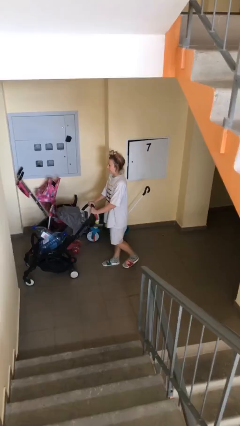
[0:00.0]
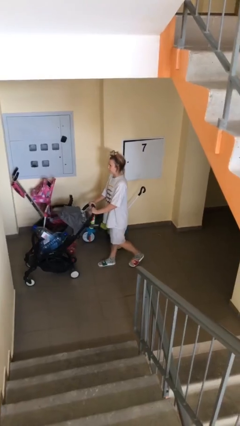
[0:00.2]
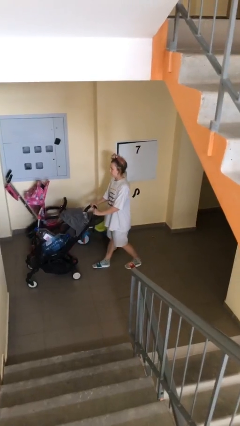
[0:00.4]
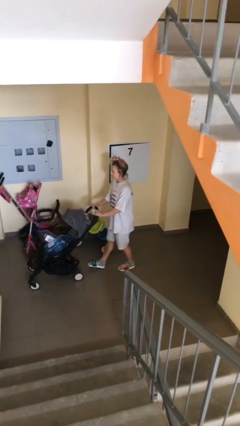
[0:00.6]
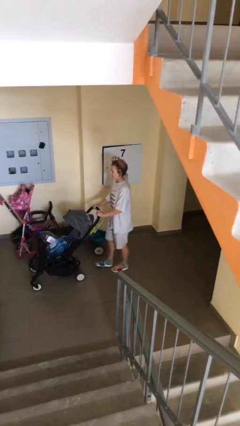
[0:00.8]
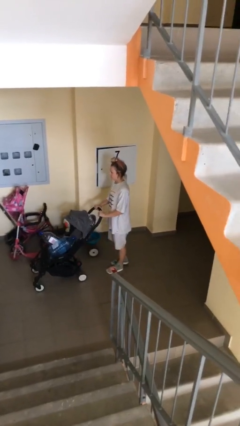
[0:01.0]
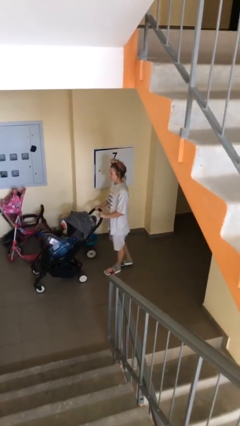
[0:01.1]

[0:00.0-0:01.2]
person pulls wheeled cart

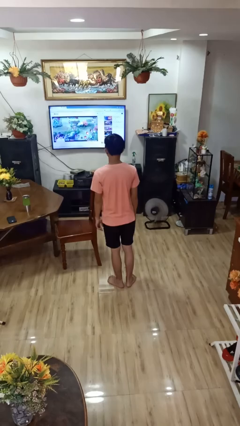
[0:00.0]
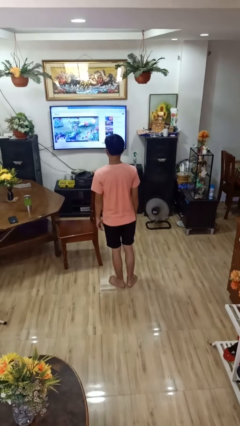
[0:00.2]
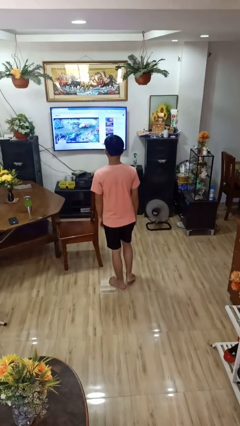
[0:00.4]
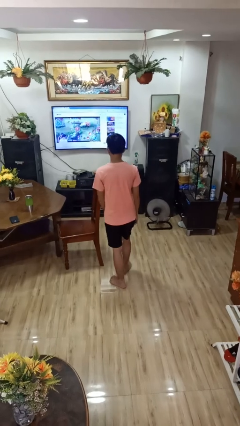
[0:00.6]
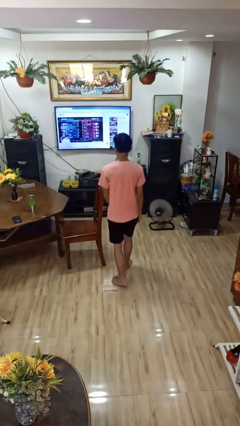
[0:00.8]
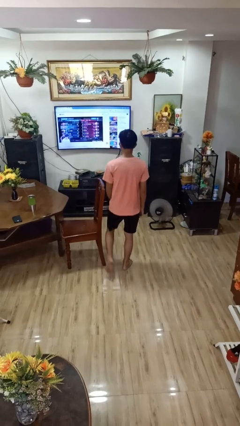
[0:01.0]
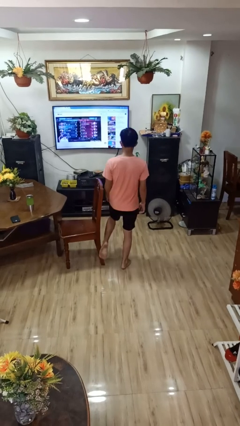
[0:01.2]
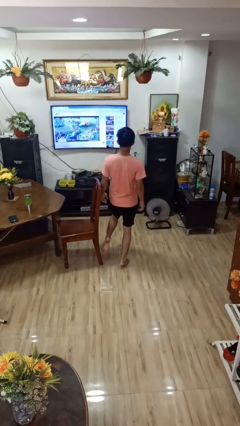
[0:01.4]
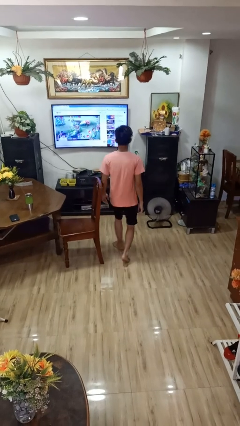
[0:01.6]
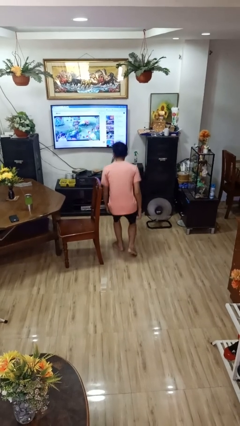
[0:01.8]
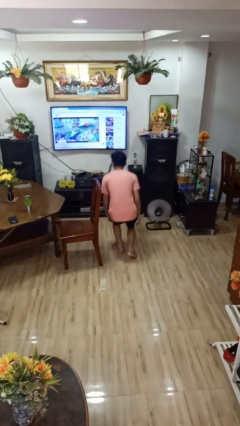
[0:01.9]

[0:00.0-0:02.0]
person trips on object on floor

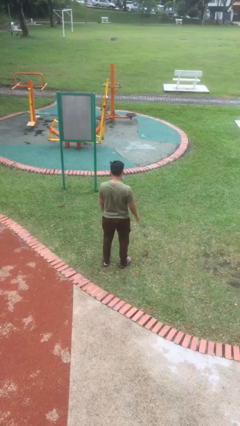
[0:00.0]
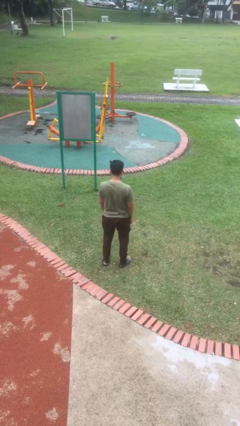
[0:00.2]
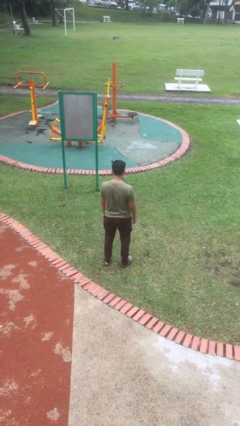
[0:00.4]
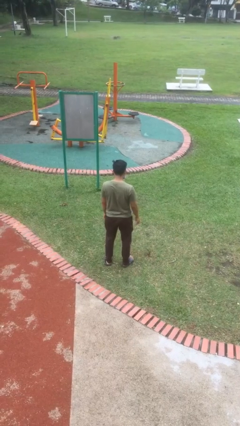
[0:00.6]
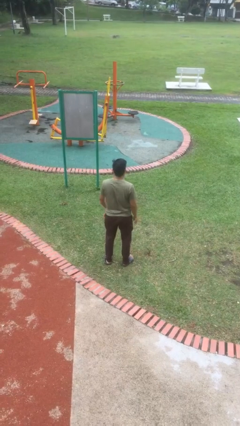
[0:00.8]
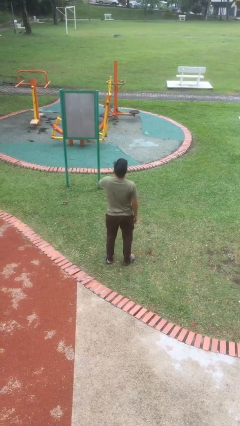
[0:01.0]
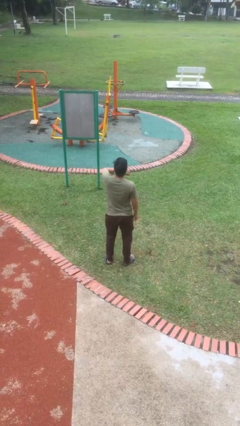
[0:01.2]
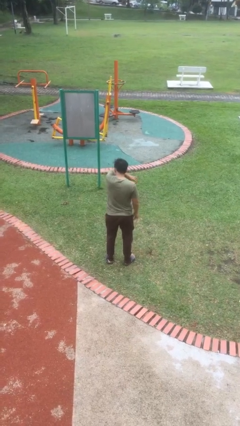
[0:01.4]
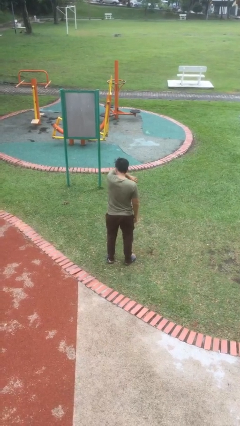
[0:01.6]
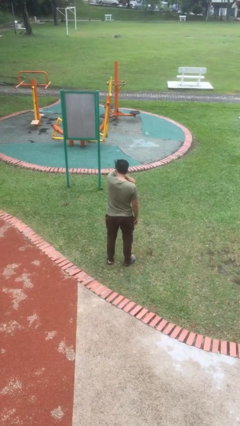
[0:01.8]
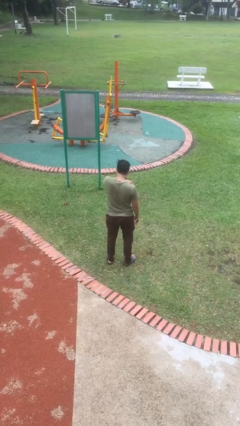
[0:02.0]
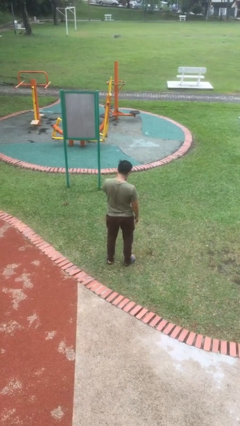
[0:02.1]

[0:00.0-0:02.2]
person sneezes into arm

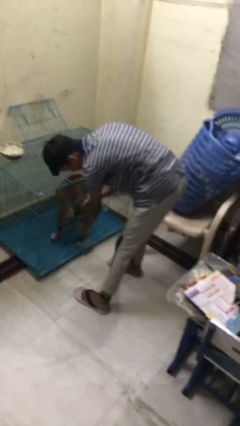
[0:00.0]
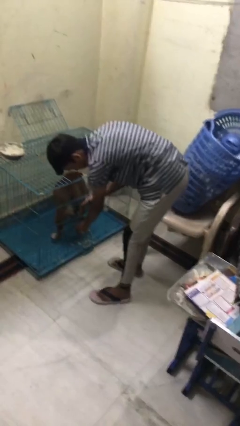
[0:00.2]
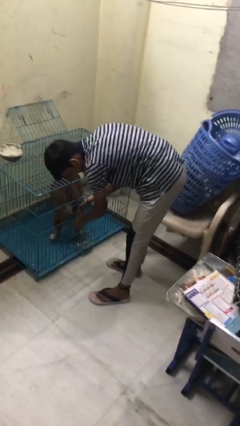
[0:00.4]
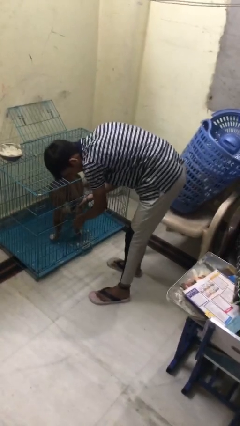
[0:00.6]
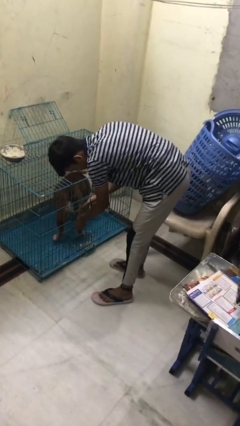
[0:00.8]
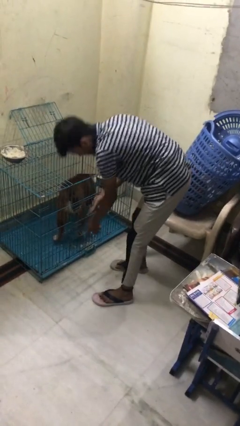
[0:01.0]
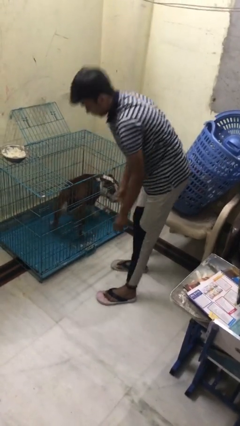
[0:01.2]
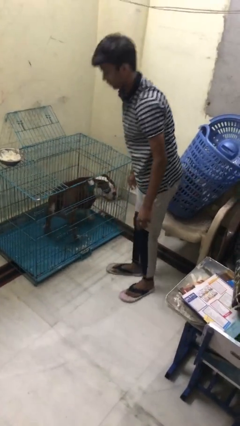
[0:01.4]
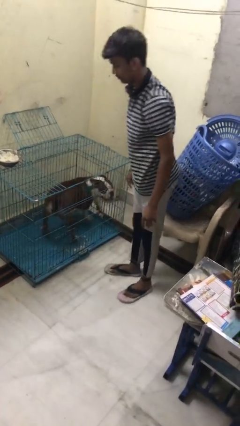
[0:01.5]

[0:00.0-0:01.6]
person crates dog

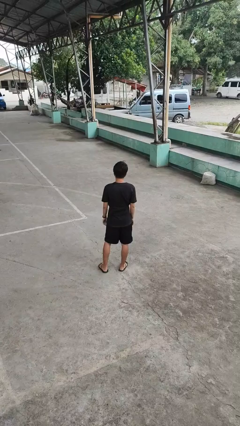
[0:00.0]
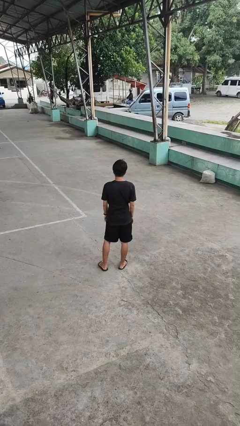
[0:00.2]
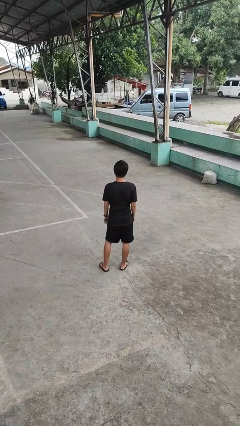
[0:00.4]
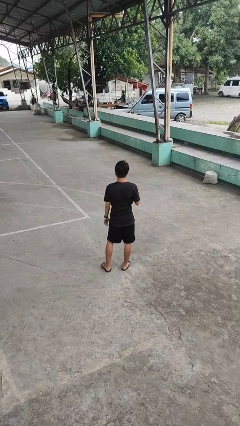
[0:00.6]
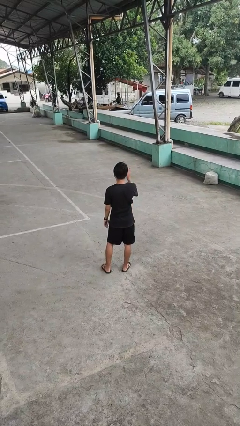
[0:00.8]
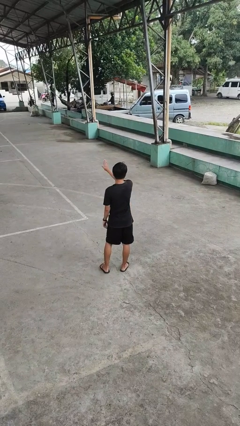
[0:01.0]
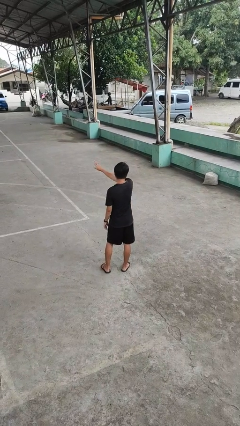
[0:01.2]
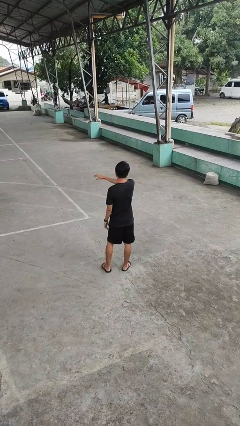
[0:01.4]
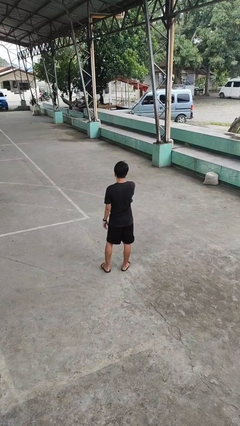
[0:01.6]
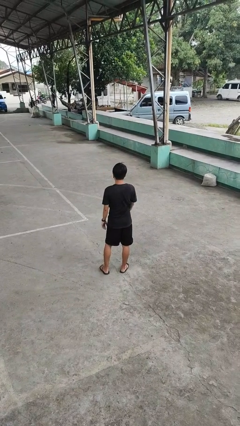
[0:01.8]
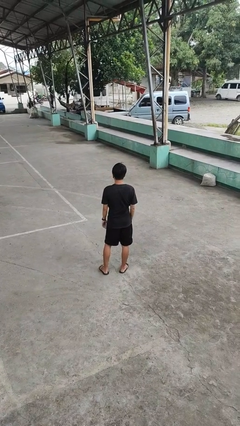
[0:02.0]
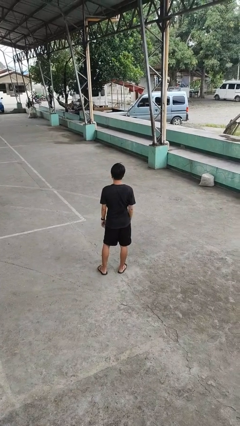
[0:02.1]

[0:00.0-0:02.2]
person gestures swipe left

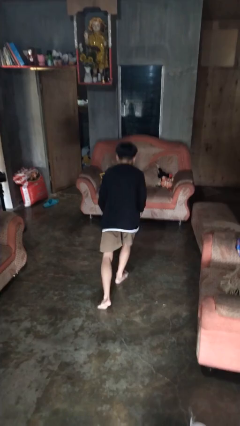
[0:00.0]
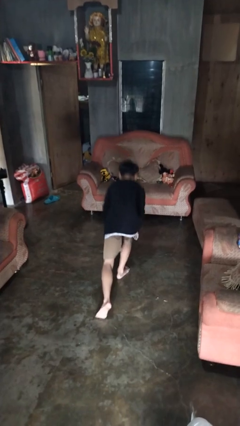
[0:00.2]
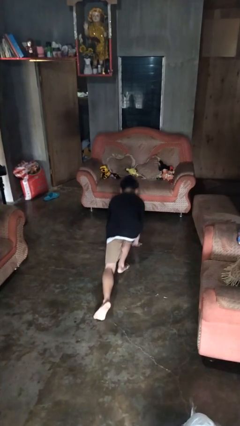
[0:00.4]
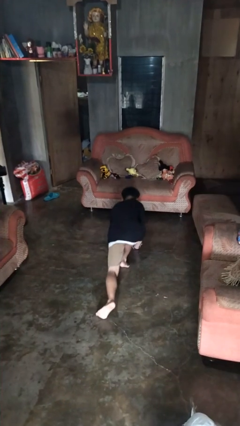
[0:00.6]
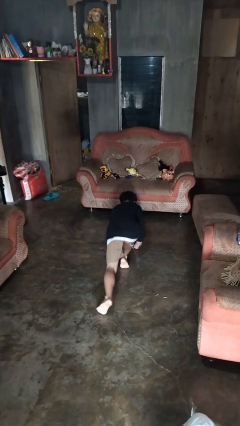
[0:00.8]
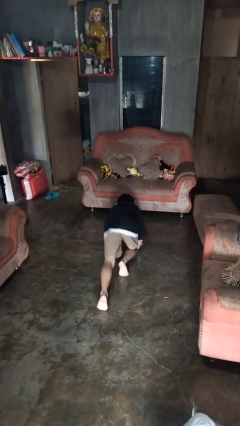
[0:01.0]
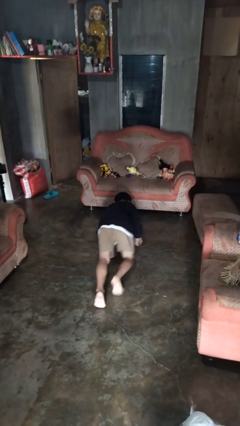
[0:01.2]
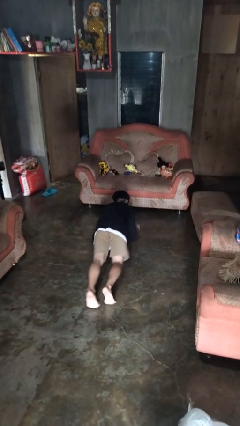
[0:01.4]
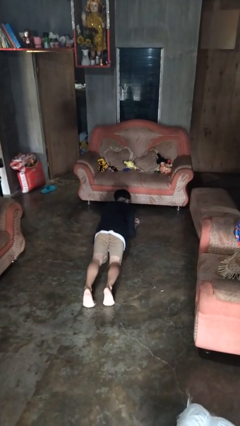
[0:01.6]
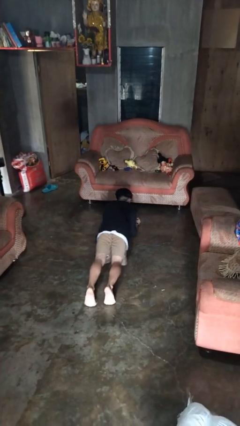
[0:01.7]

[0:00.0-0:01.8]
person exercises with plank

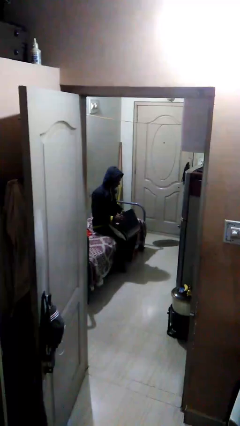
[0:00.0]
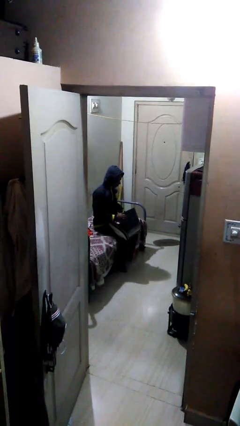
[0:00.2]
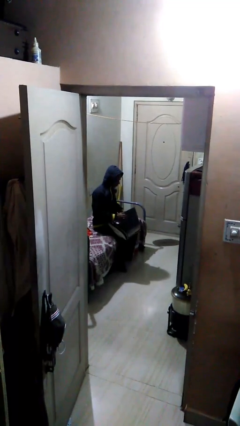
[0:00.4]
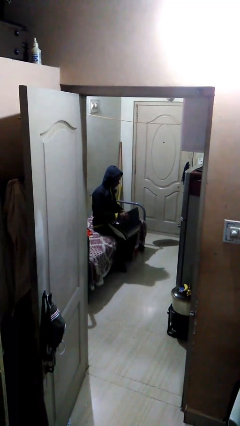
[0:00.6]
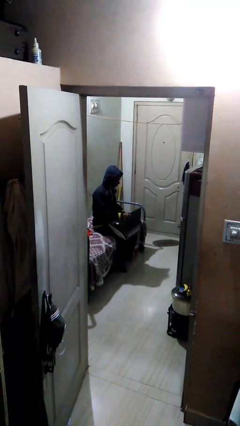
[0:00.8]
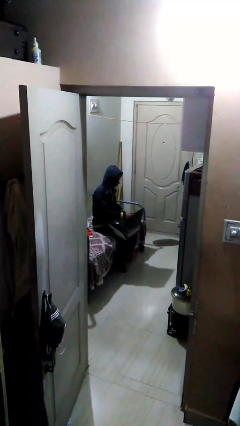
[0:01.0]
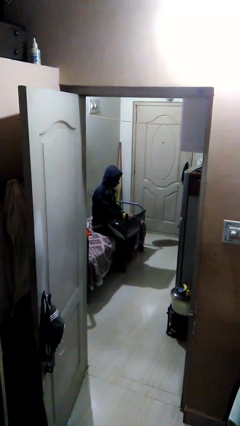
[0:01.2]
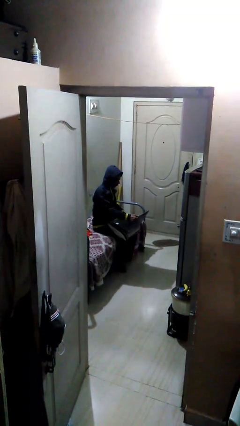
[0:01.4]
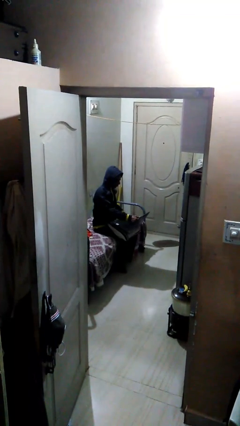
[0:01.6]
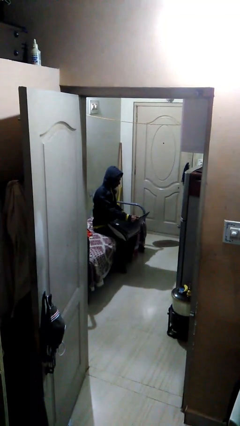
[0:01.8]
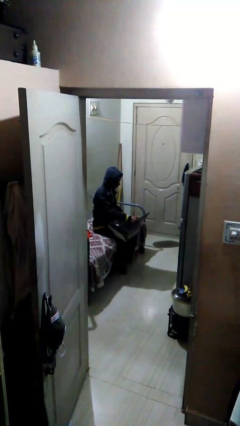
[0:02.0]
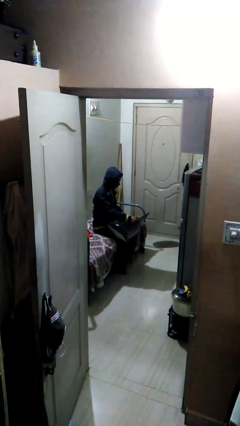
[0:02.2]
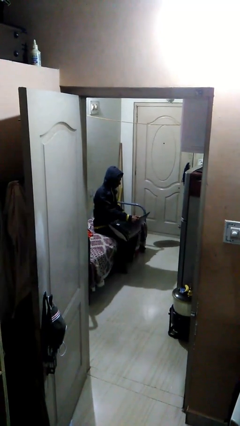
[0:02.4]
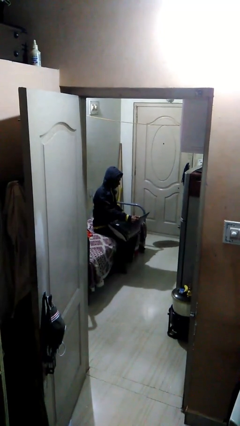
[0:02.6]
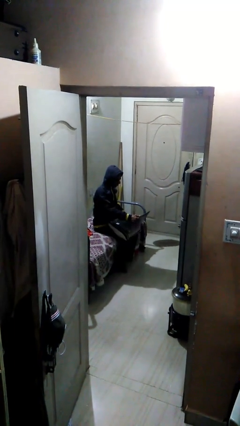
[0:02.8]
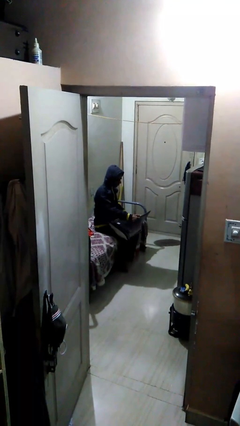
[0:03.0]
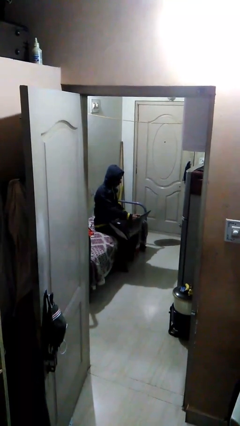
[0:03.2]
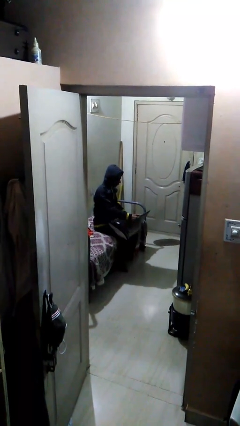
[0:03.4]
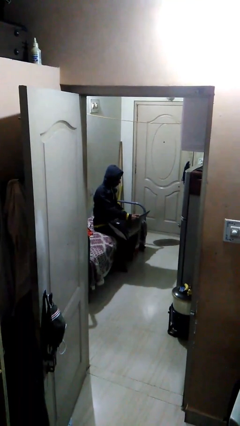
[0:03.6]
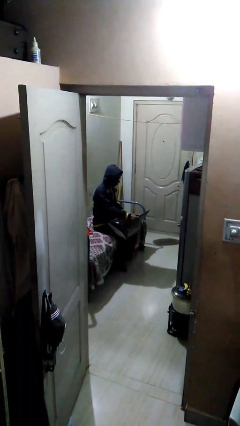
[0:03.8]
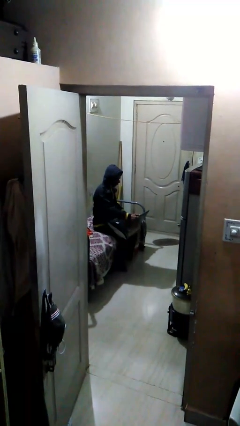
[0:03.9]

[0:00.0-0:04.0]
person interacts with laptop

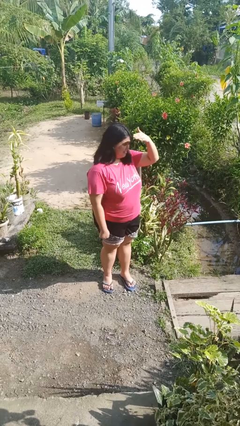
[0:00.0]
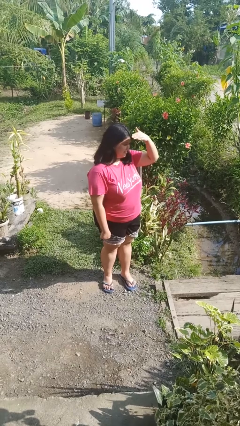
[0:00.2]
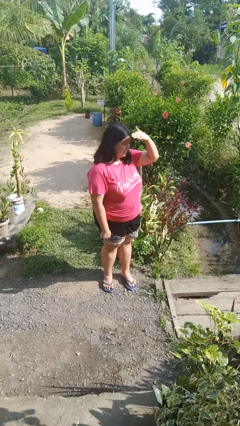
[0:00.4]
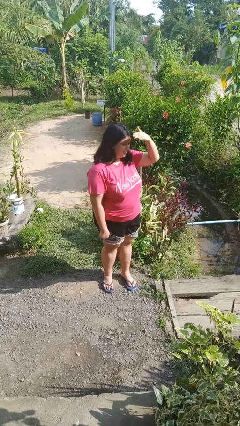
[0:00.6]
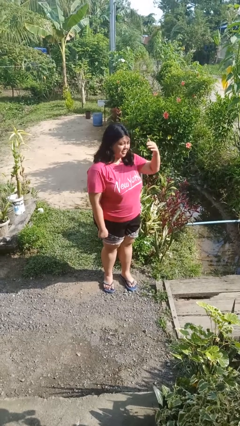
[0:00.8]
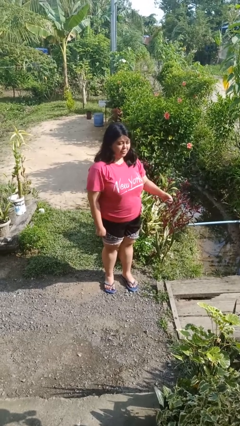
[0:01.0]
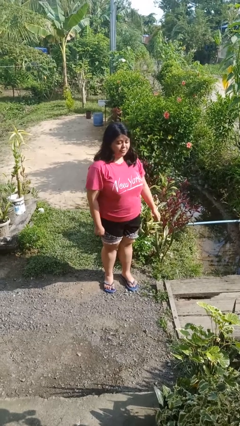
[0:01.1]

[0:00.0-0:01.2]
person shades eyes

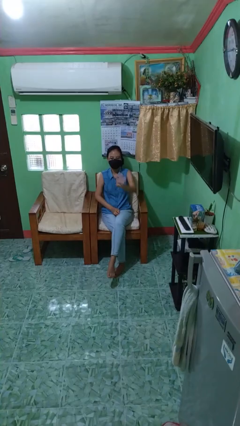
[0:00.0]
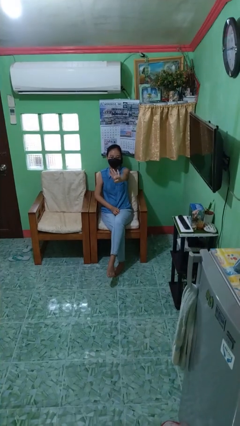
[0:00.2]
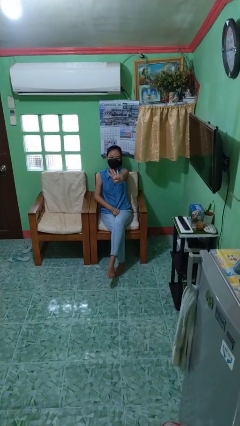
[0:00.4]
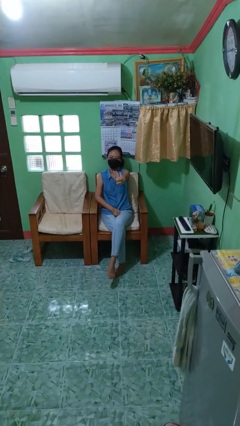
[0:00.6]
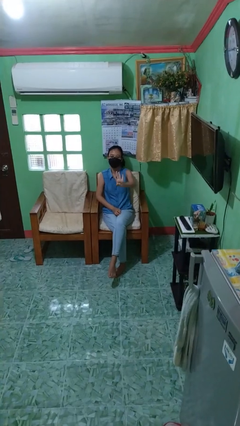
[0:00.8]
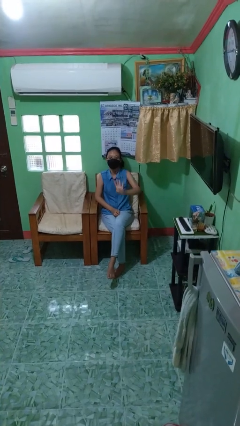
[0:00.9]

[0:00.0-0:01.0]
person gestures number four
